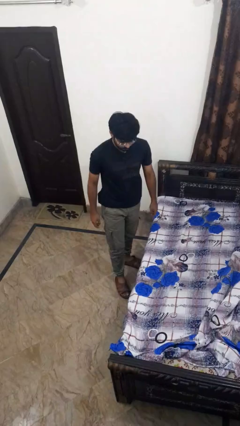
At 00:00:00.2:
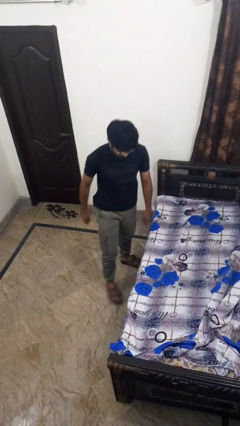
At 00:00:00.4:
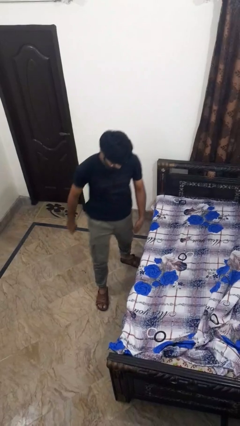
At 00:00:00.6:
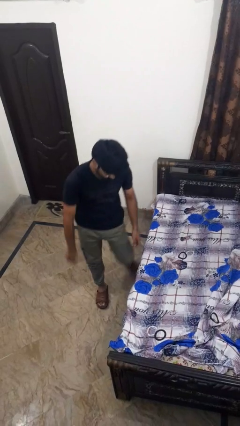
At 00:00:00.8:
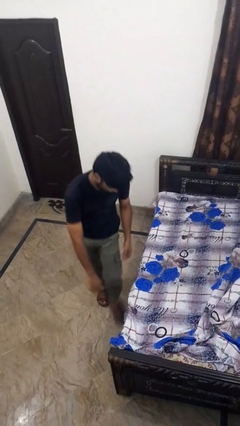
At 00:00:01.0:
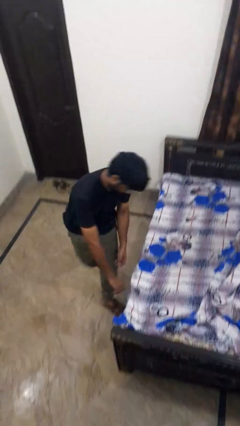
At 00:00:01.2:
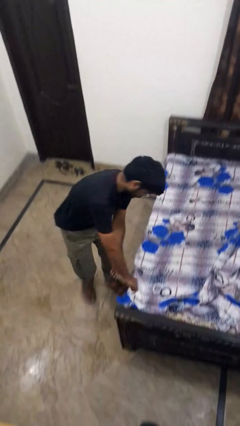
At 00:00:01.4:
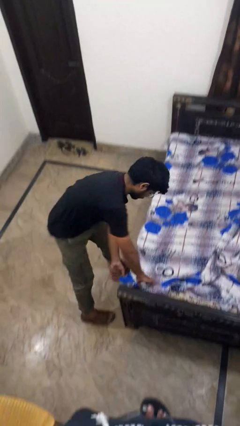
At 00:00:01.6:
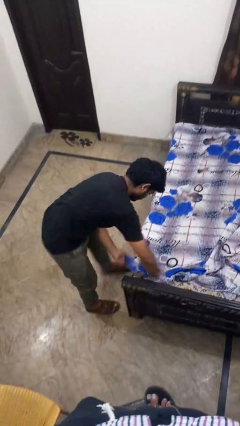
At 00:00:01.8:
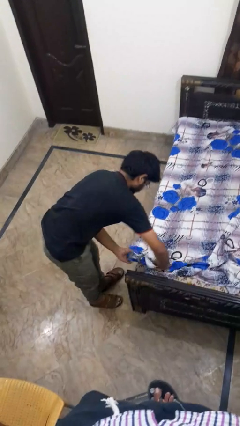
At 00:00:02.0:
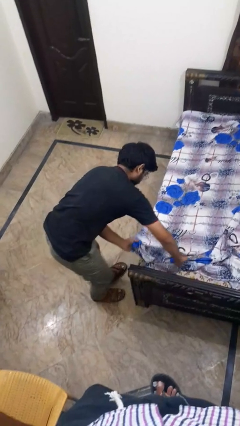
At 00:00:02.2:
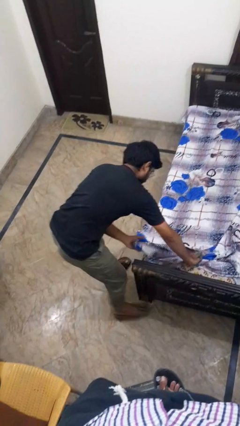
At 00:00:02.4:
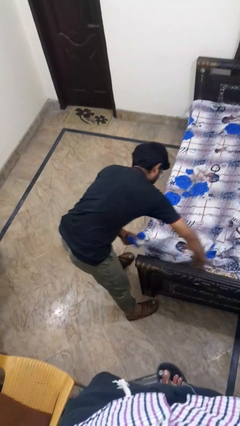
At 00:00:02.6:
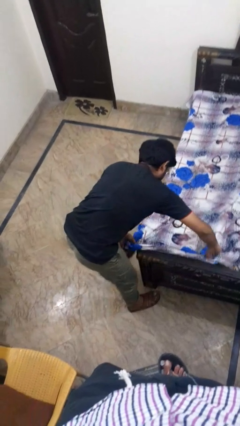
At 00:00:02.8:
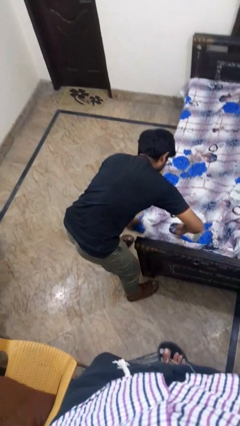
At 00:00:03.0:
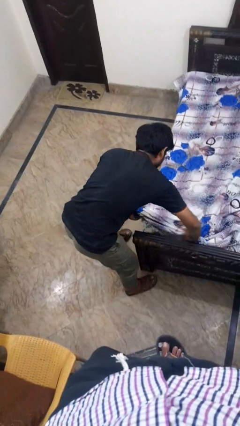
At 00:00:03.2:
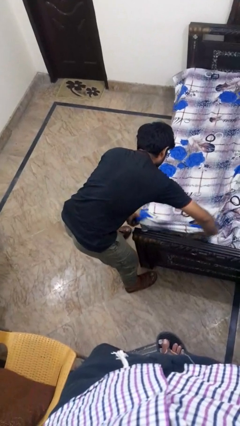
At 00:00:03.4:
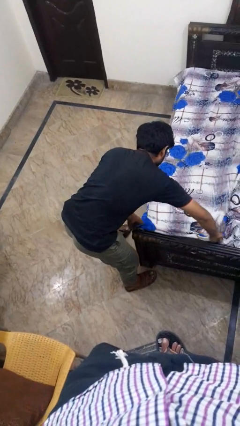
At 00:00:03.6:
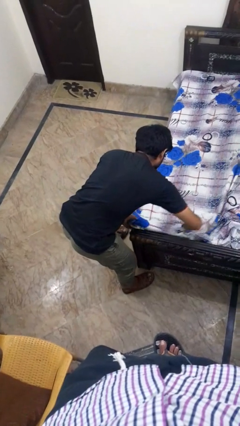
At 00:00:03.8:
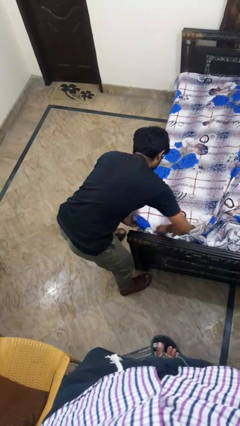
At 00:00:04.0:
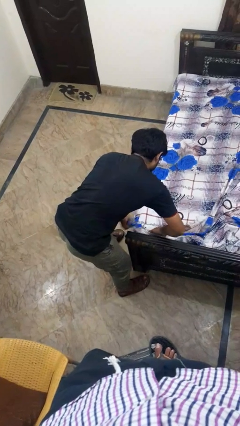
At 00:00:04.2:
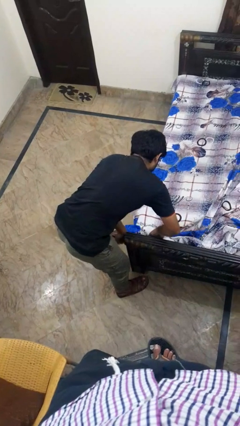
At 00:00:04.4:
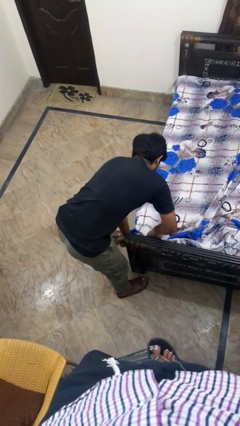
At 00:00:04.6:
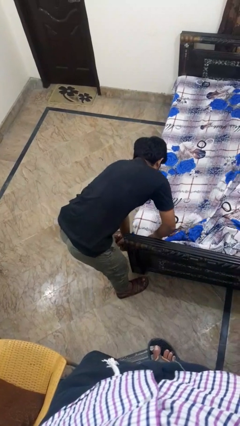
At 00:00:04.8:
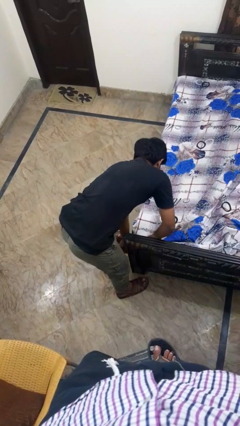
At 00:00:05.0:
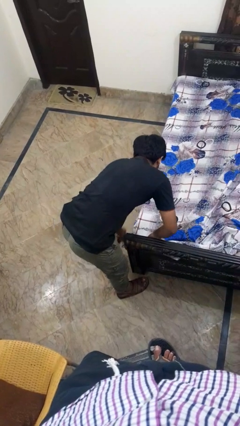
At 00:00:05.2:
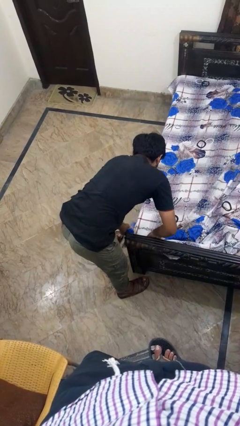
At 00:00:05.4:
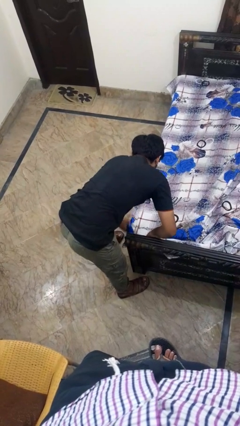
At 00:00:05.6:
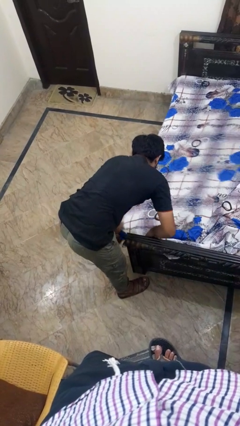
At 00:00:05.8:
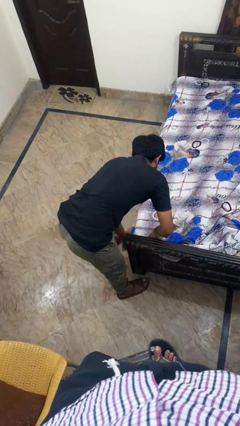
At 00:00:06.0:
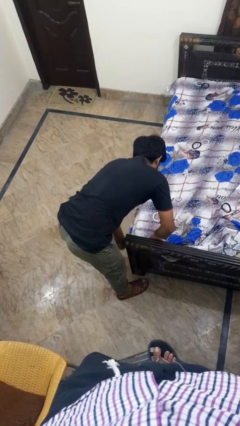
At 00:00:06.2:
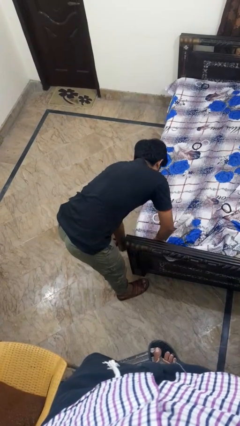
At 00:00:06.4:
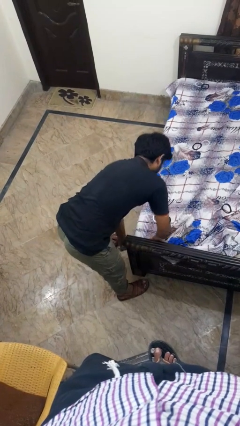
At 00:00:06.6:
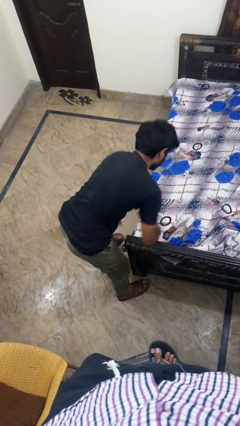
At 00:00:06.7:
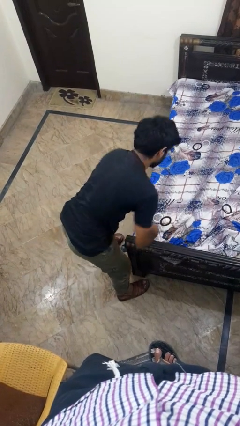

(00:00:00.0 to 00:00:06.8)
person makes bed

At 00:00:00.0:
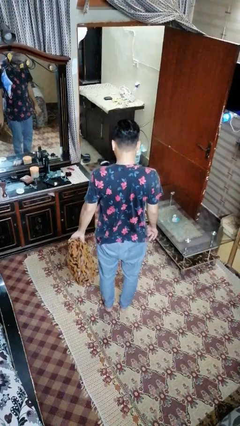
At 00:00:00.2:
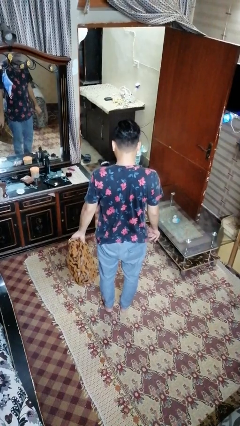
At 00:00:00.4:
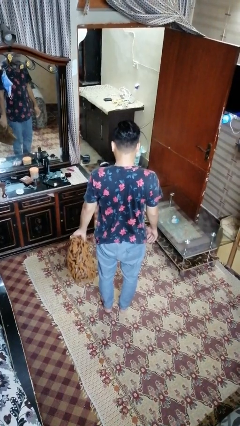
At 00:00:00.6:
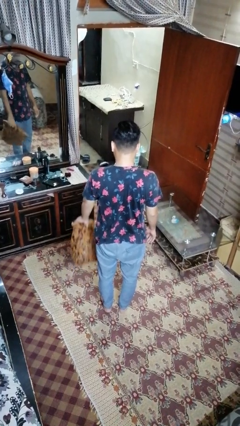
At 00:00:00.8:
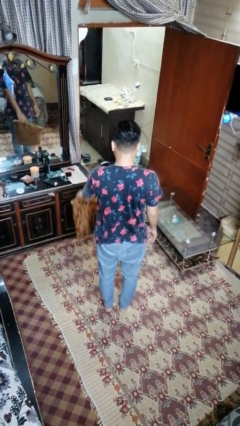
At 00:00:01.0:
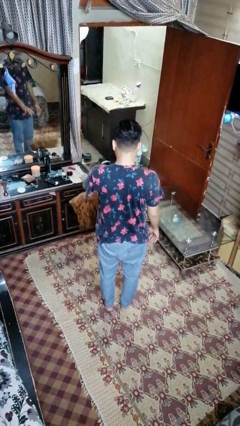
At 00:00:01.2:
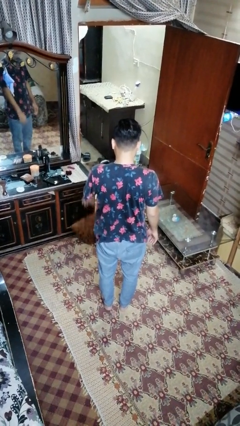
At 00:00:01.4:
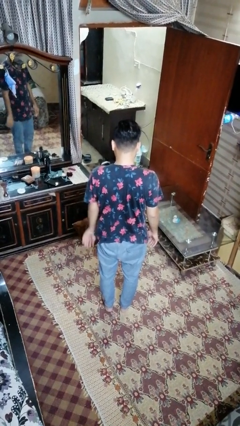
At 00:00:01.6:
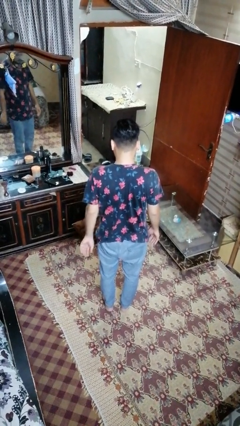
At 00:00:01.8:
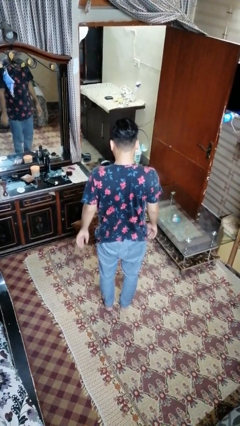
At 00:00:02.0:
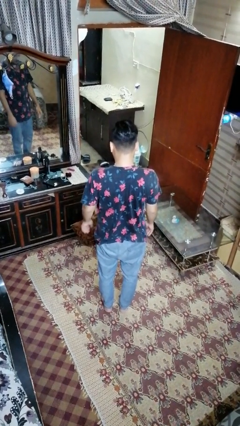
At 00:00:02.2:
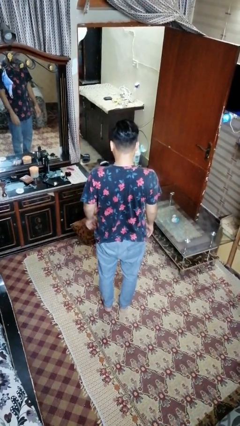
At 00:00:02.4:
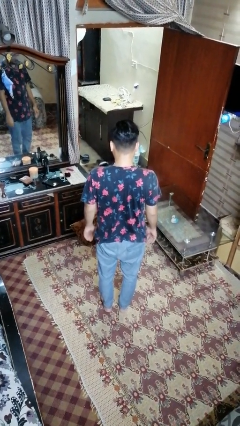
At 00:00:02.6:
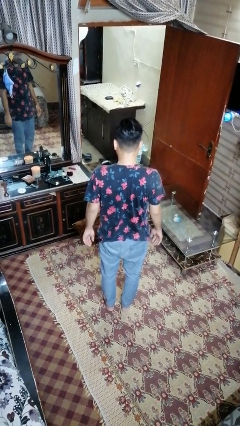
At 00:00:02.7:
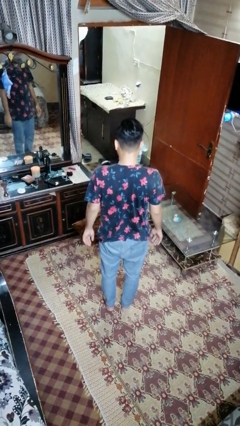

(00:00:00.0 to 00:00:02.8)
person throws object to ground

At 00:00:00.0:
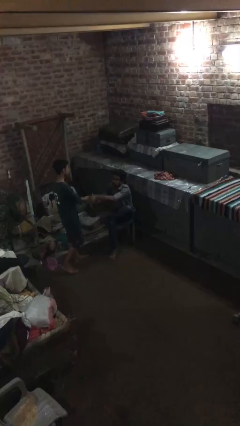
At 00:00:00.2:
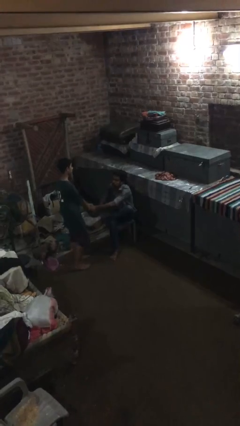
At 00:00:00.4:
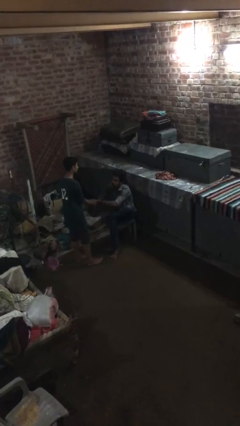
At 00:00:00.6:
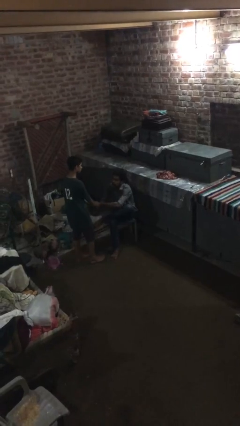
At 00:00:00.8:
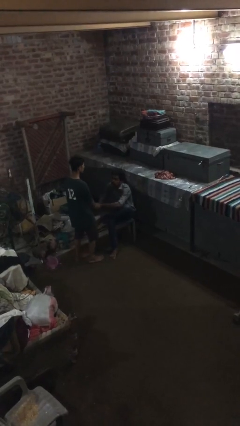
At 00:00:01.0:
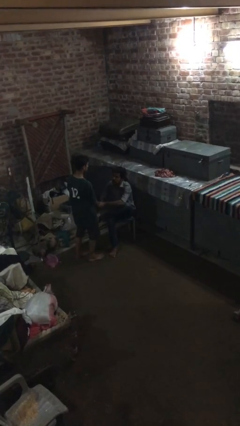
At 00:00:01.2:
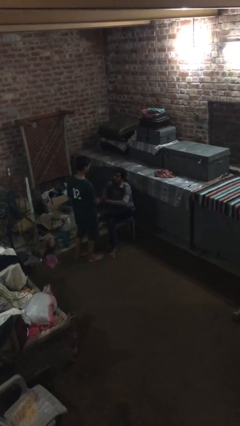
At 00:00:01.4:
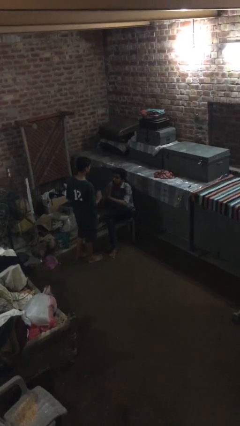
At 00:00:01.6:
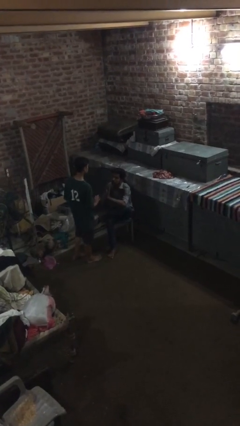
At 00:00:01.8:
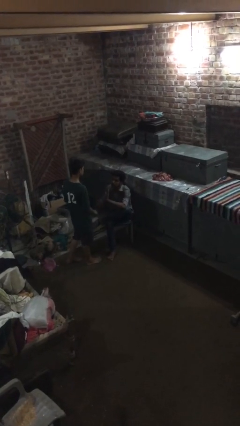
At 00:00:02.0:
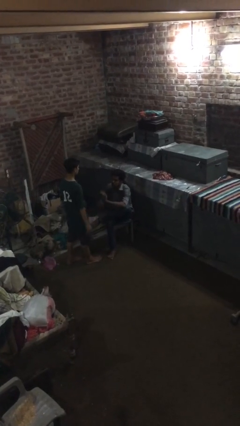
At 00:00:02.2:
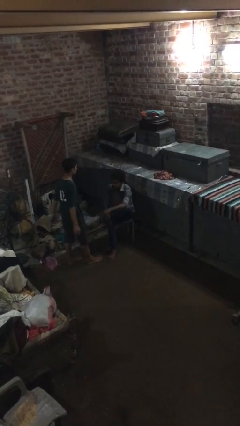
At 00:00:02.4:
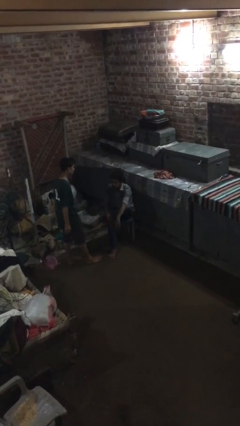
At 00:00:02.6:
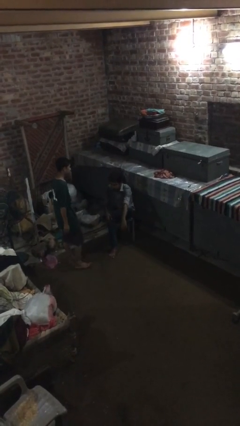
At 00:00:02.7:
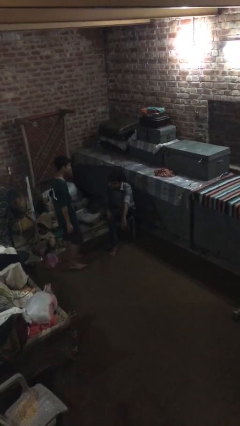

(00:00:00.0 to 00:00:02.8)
person shakes hand

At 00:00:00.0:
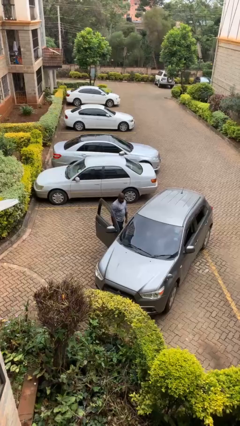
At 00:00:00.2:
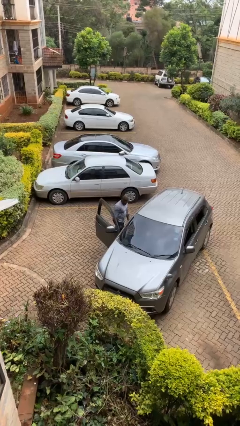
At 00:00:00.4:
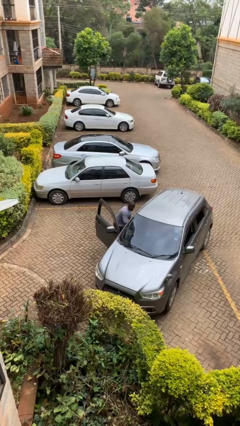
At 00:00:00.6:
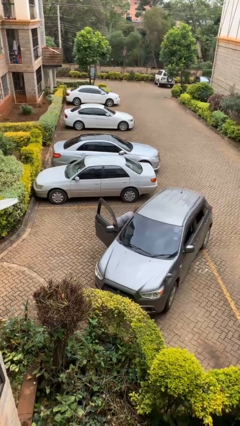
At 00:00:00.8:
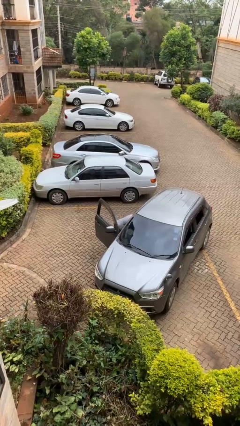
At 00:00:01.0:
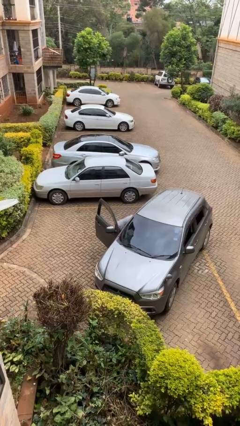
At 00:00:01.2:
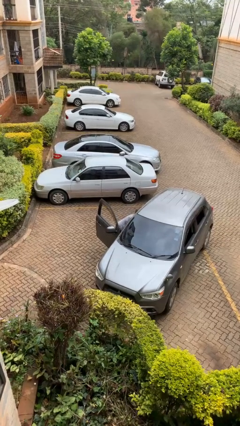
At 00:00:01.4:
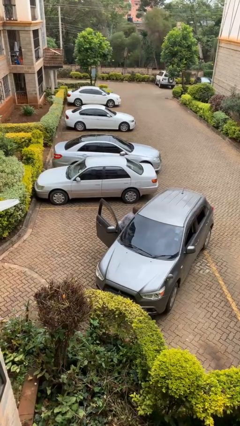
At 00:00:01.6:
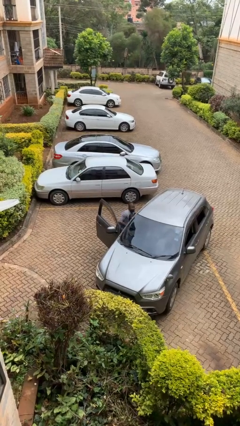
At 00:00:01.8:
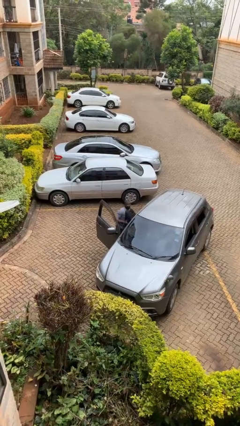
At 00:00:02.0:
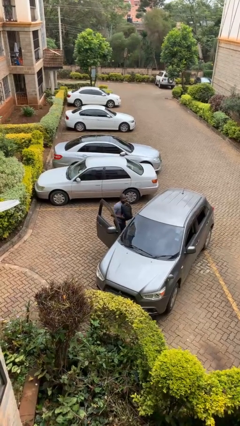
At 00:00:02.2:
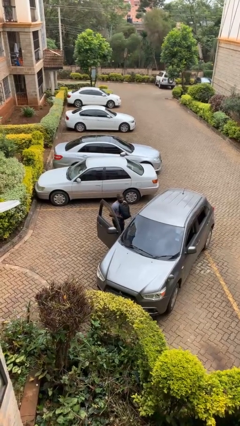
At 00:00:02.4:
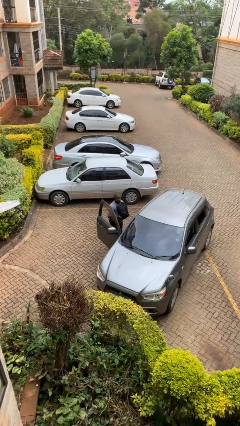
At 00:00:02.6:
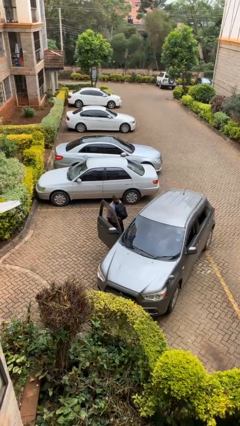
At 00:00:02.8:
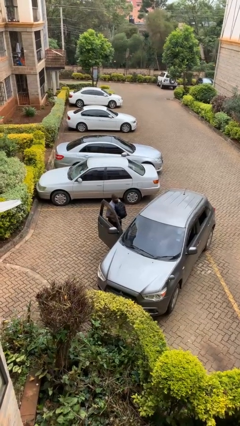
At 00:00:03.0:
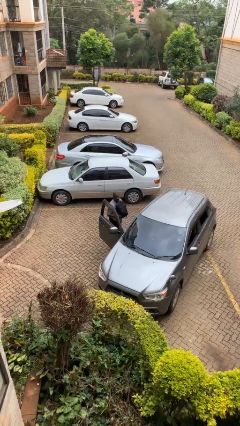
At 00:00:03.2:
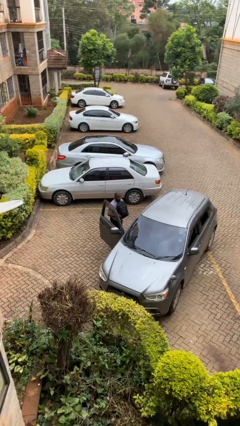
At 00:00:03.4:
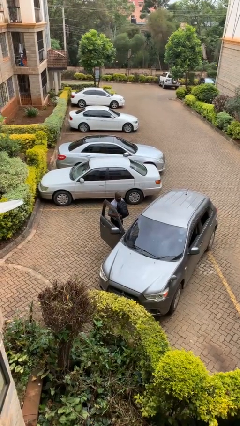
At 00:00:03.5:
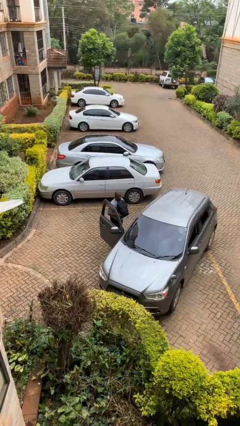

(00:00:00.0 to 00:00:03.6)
person unloads car

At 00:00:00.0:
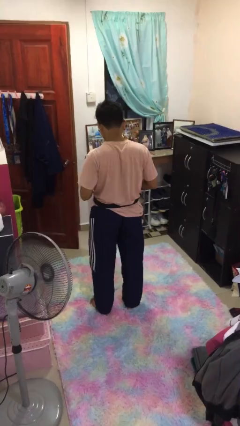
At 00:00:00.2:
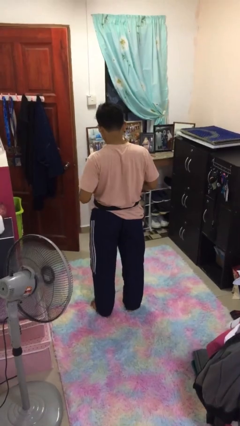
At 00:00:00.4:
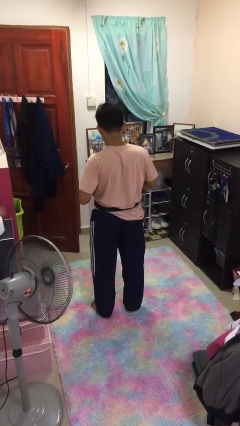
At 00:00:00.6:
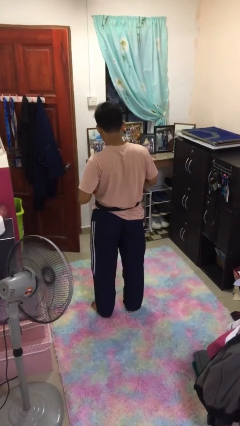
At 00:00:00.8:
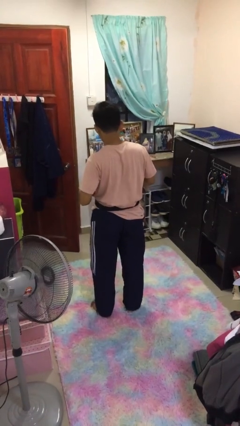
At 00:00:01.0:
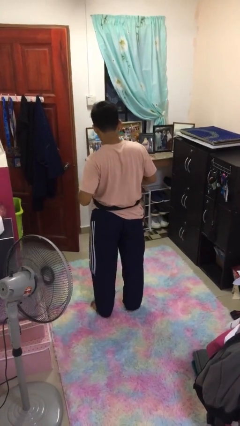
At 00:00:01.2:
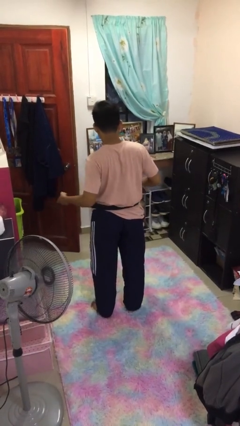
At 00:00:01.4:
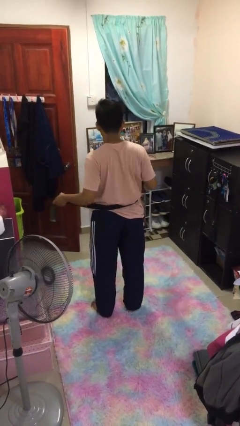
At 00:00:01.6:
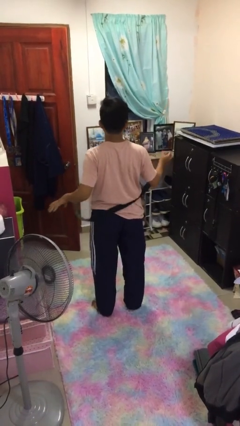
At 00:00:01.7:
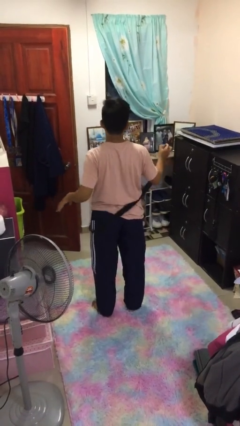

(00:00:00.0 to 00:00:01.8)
person takes off belt
